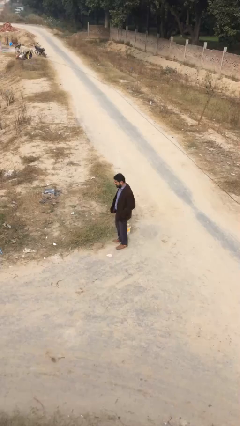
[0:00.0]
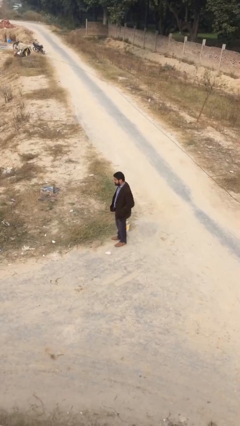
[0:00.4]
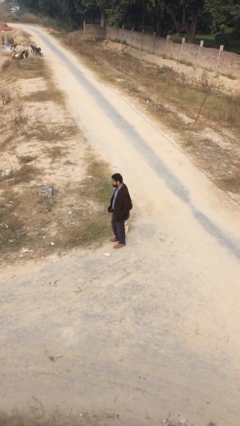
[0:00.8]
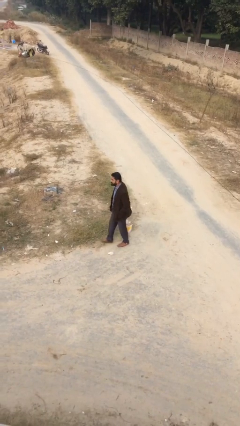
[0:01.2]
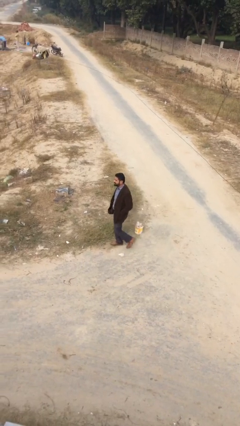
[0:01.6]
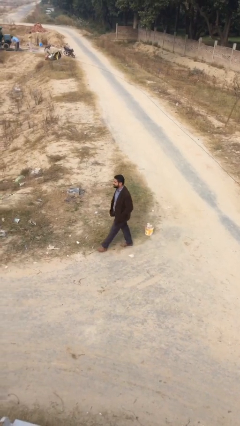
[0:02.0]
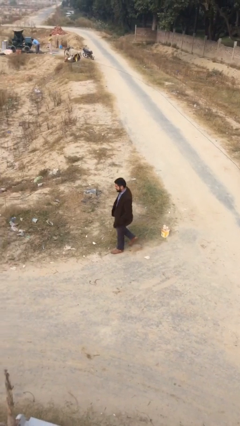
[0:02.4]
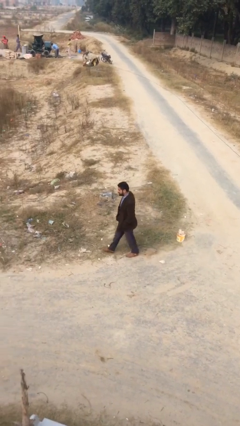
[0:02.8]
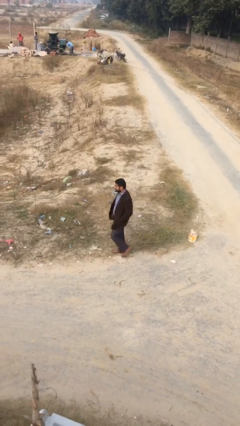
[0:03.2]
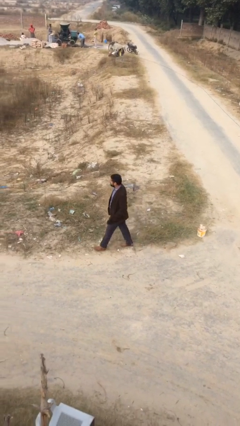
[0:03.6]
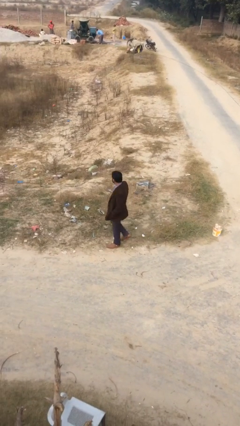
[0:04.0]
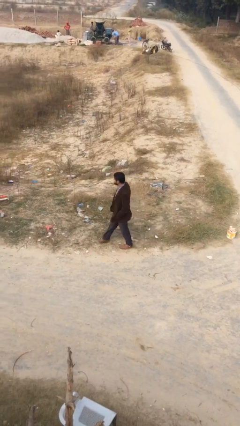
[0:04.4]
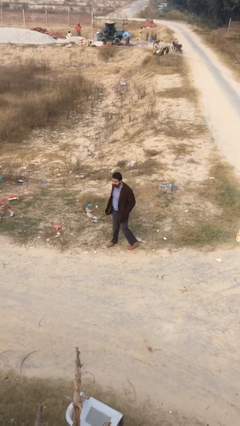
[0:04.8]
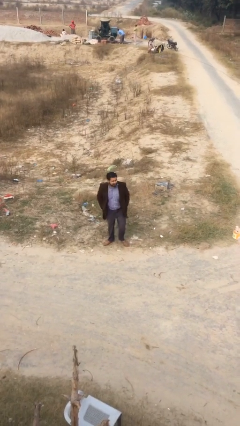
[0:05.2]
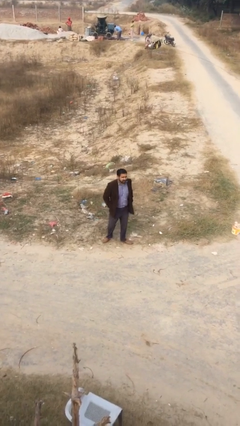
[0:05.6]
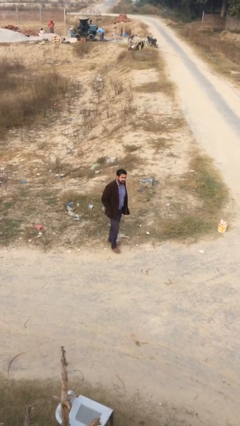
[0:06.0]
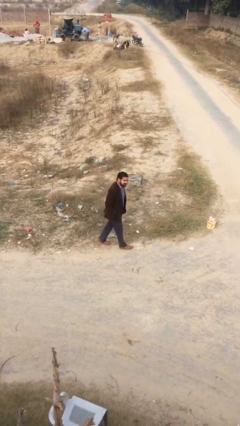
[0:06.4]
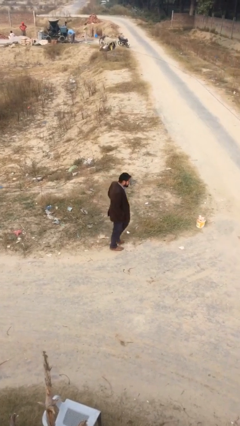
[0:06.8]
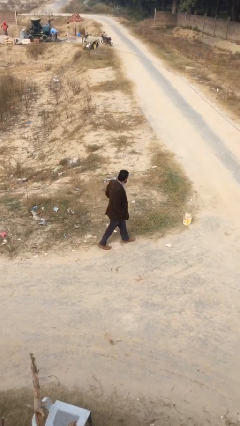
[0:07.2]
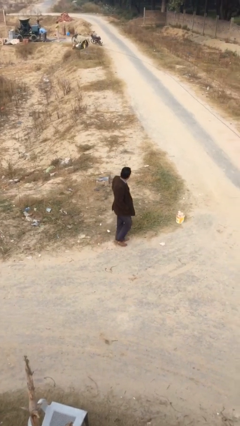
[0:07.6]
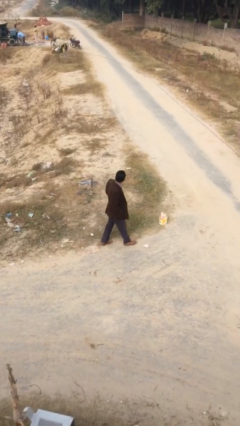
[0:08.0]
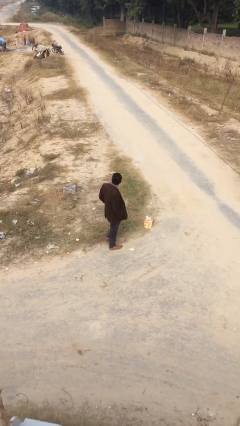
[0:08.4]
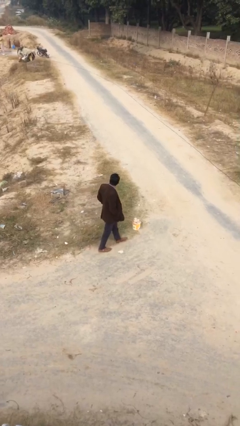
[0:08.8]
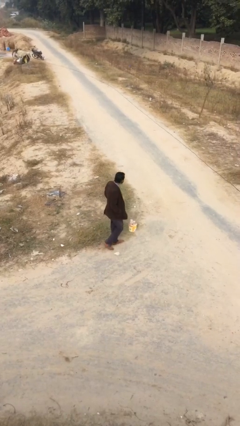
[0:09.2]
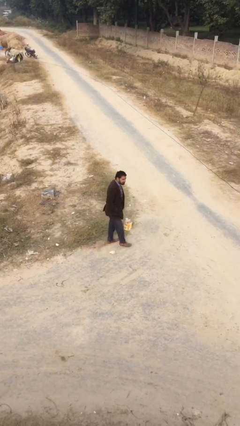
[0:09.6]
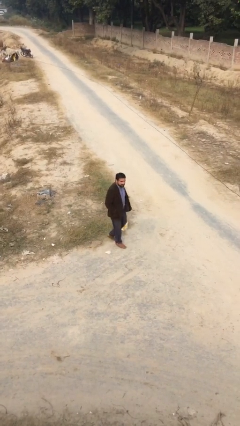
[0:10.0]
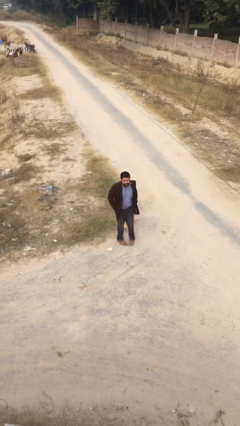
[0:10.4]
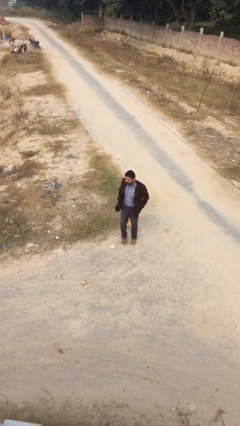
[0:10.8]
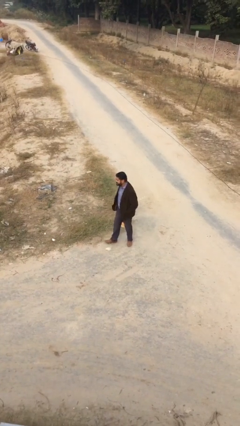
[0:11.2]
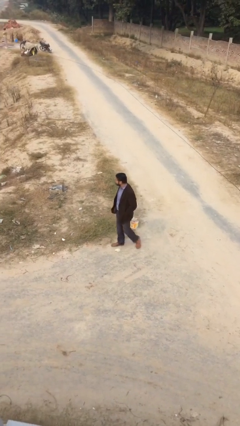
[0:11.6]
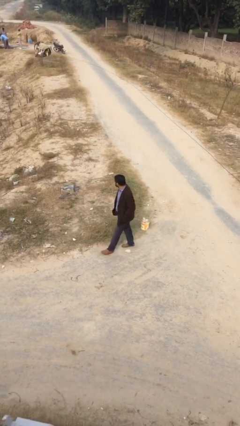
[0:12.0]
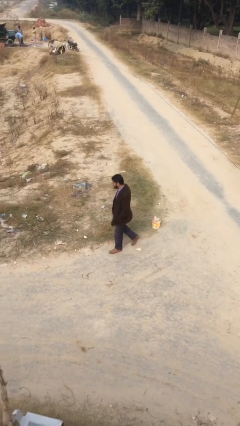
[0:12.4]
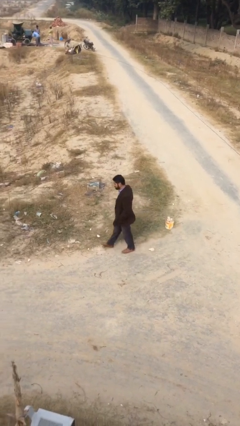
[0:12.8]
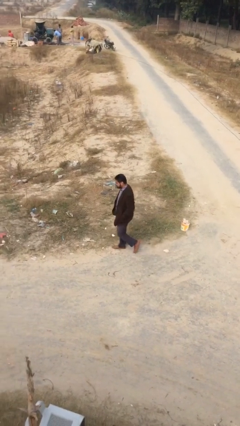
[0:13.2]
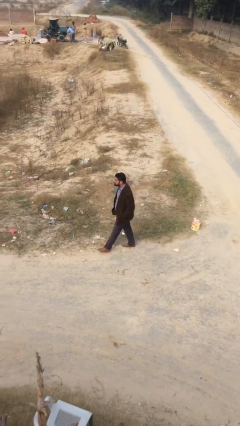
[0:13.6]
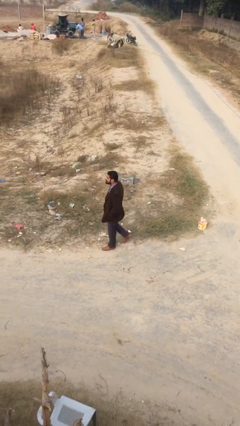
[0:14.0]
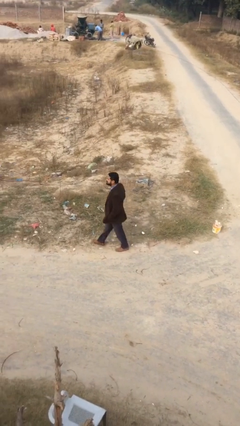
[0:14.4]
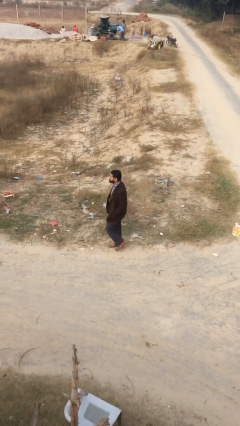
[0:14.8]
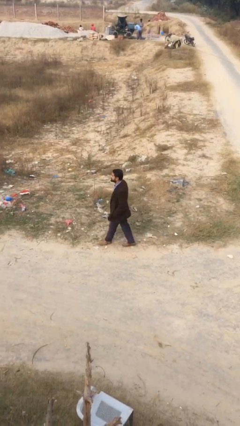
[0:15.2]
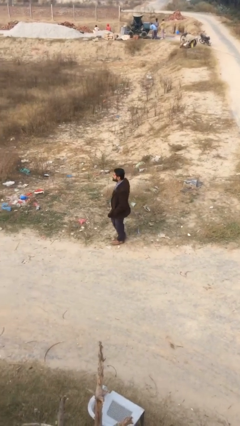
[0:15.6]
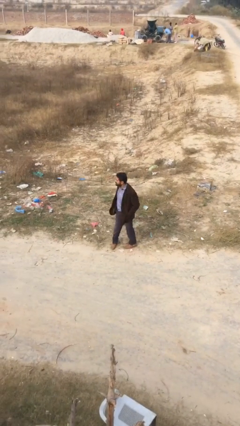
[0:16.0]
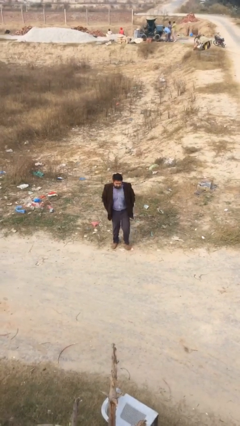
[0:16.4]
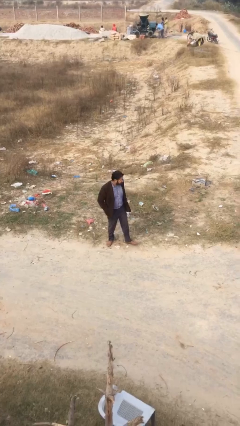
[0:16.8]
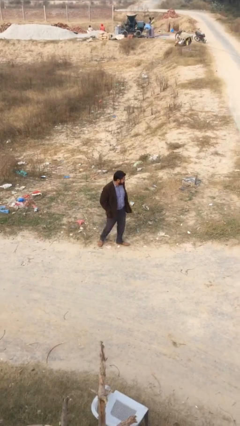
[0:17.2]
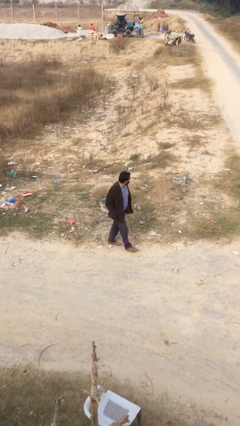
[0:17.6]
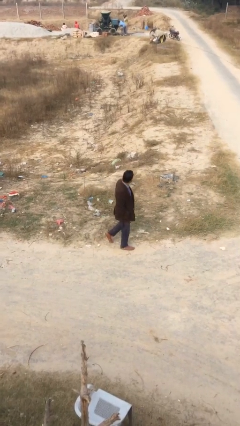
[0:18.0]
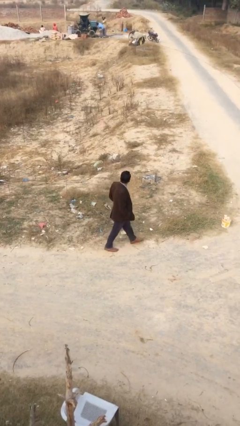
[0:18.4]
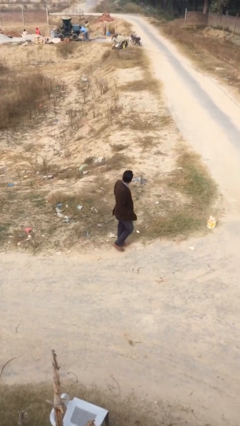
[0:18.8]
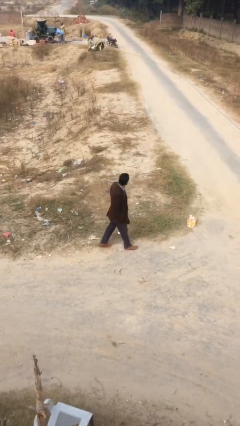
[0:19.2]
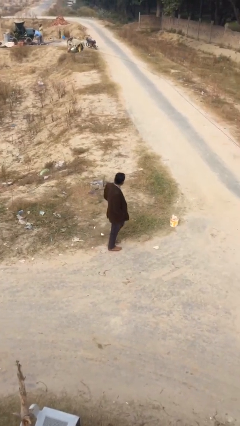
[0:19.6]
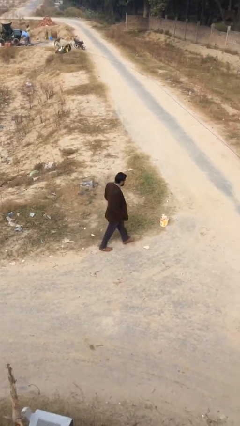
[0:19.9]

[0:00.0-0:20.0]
person walks

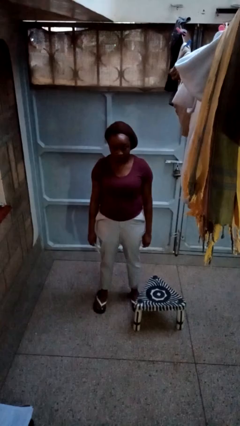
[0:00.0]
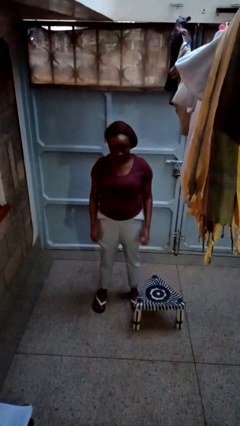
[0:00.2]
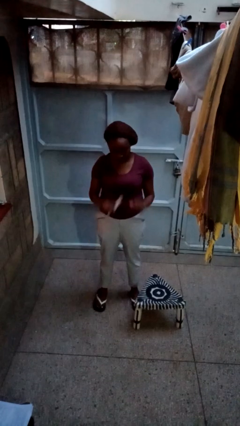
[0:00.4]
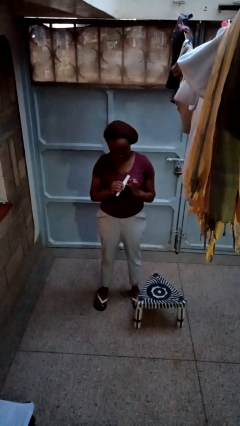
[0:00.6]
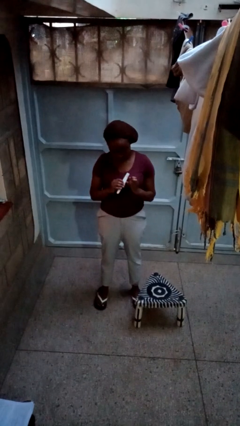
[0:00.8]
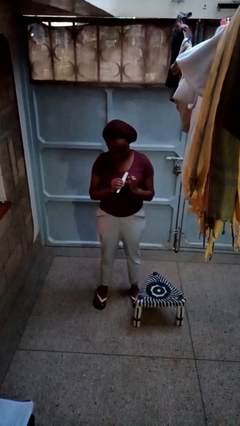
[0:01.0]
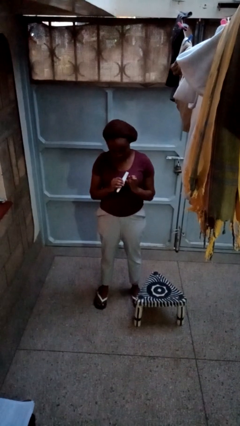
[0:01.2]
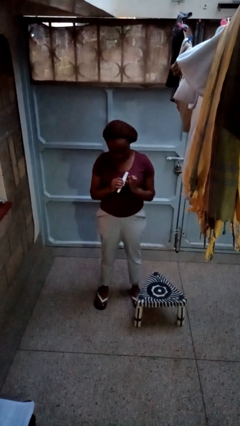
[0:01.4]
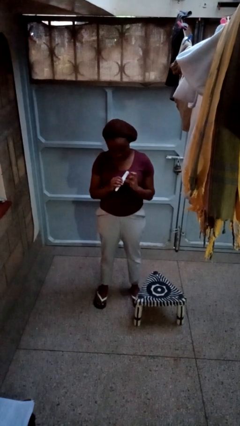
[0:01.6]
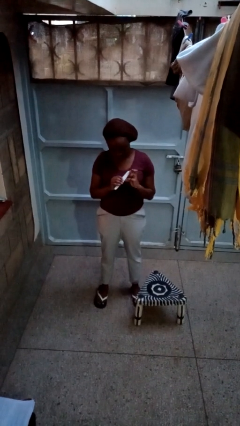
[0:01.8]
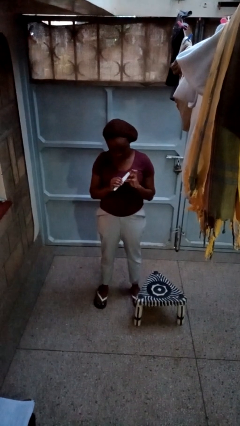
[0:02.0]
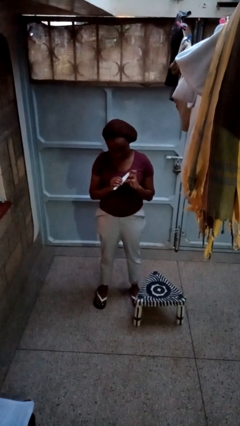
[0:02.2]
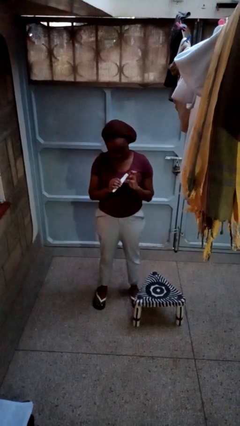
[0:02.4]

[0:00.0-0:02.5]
person files fingernails

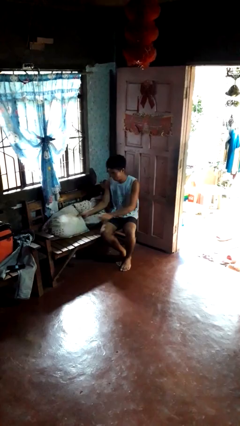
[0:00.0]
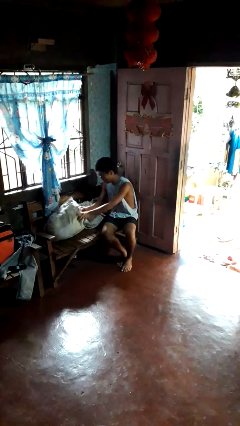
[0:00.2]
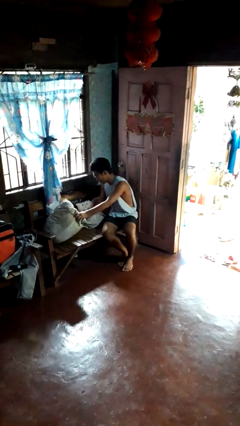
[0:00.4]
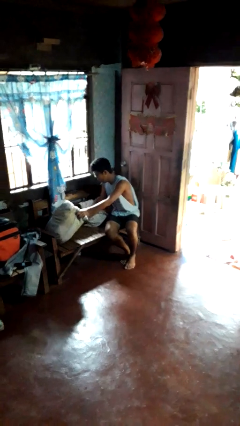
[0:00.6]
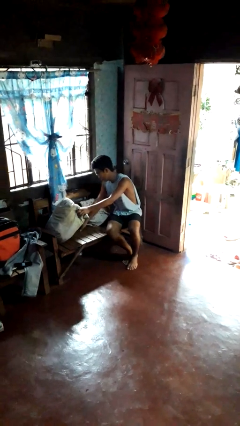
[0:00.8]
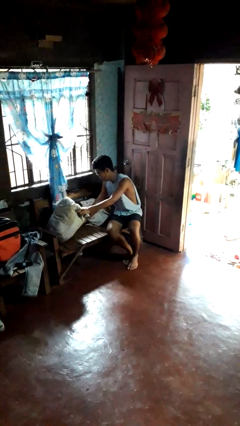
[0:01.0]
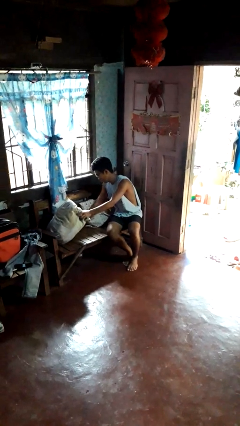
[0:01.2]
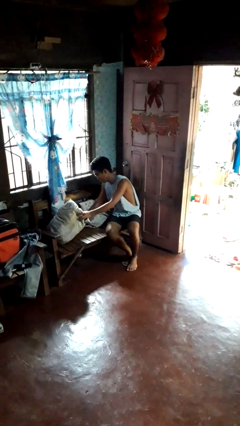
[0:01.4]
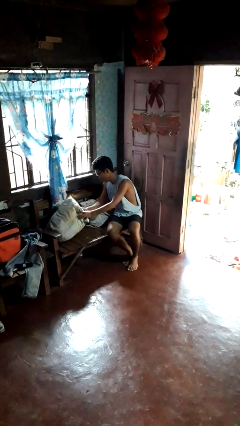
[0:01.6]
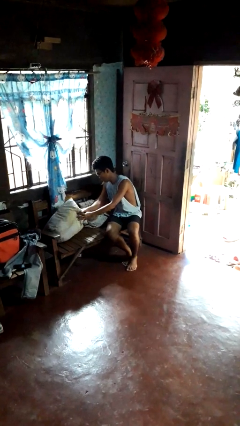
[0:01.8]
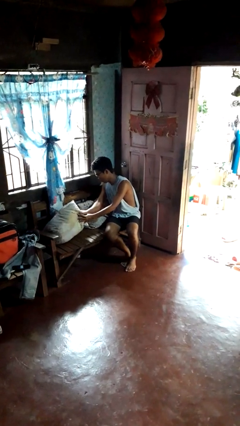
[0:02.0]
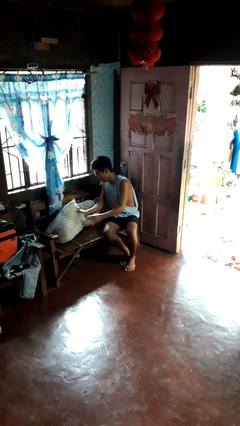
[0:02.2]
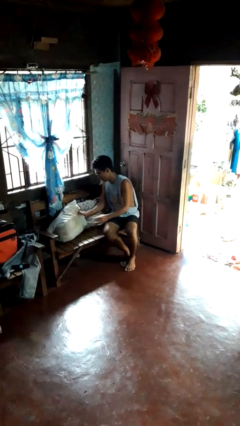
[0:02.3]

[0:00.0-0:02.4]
person searches in couch

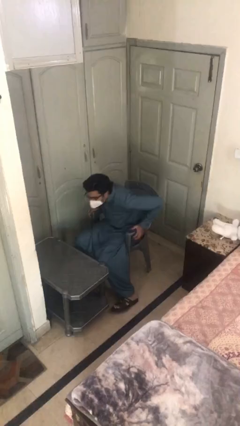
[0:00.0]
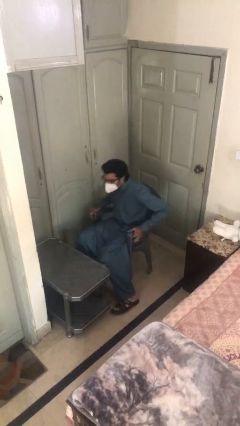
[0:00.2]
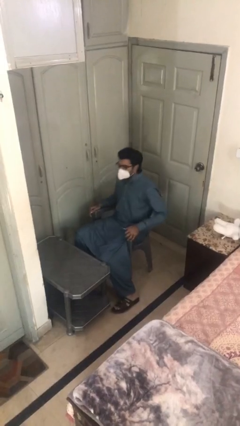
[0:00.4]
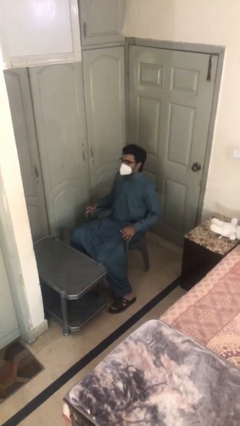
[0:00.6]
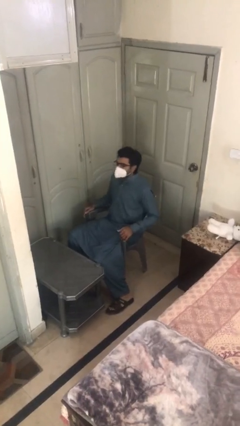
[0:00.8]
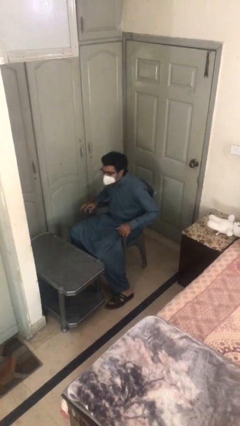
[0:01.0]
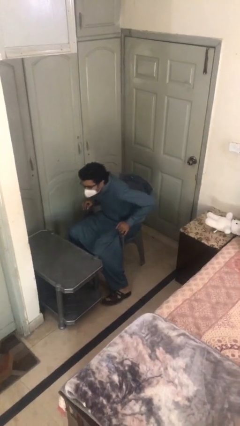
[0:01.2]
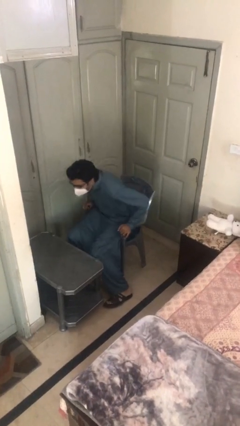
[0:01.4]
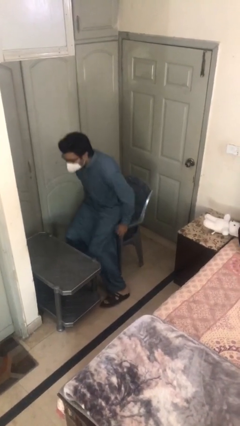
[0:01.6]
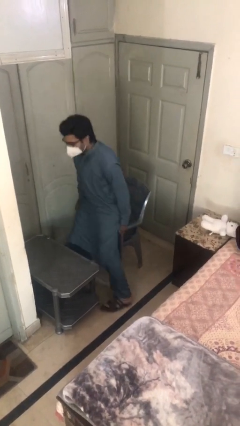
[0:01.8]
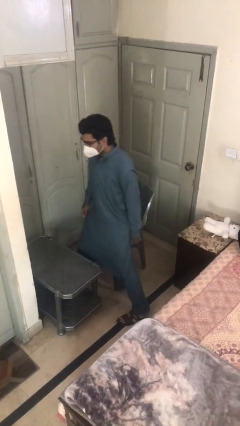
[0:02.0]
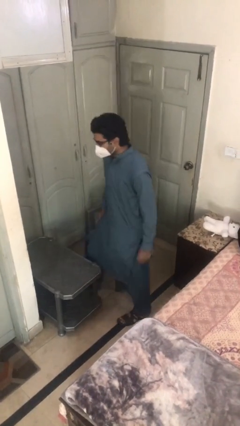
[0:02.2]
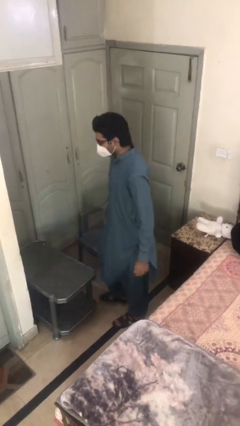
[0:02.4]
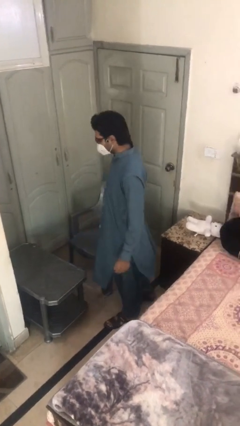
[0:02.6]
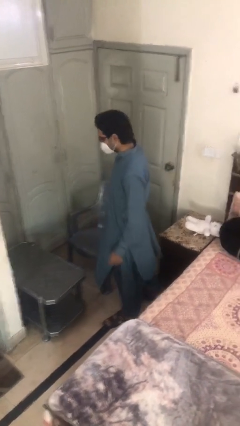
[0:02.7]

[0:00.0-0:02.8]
person stands up

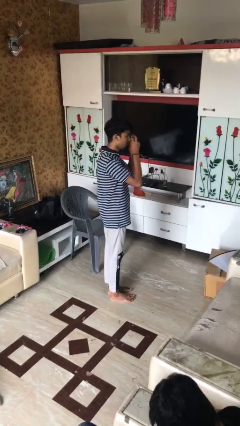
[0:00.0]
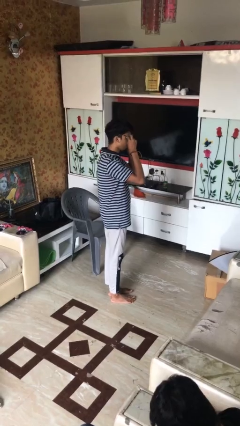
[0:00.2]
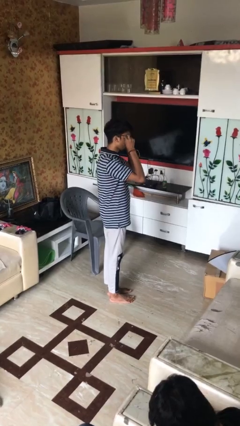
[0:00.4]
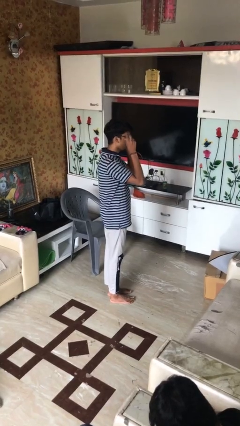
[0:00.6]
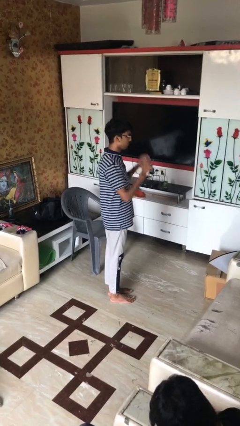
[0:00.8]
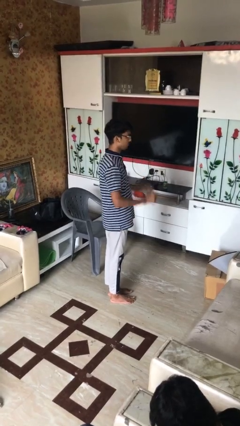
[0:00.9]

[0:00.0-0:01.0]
person puts on glasses
